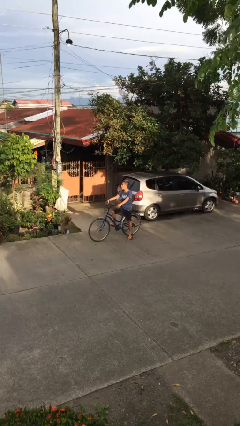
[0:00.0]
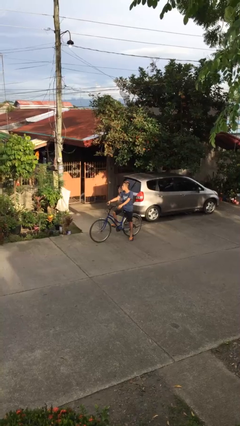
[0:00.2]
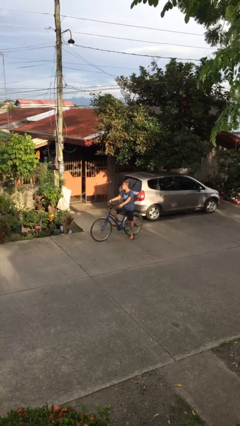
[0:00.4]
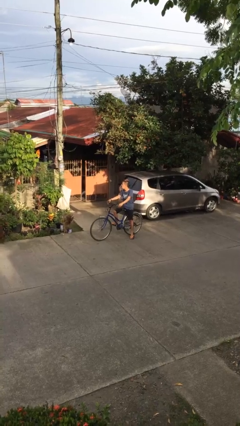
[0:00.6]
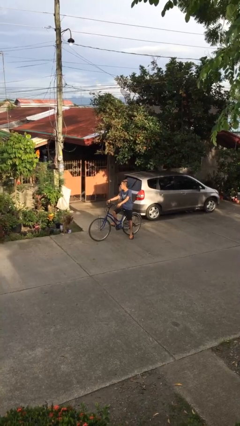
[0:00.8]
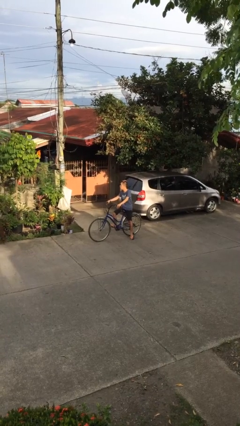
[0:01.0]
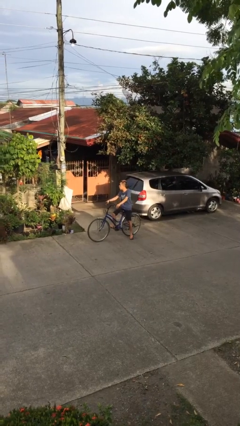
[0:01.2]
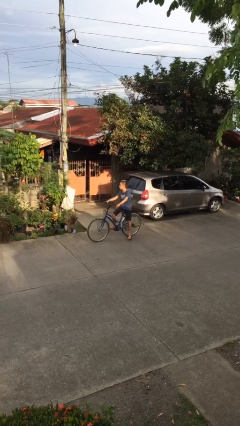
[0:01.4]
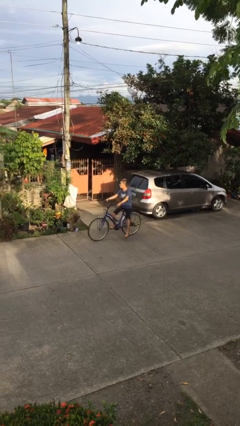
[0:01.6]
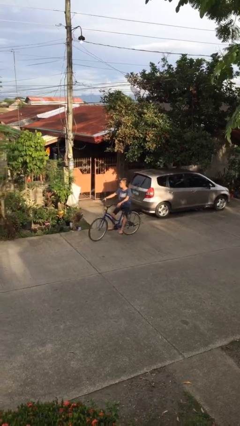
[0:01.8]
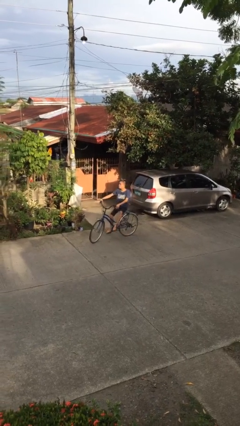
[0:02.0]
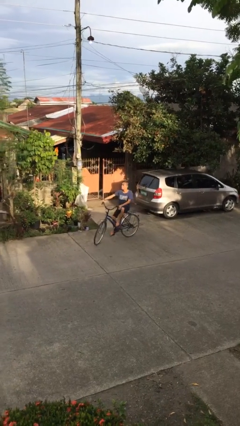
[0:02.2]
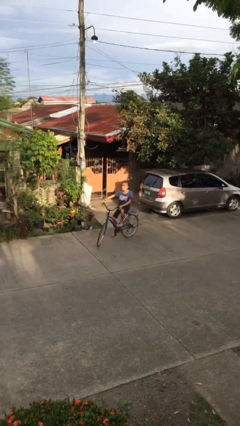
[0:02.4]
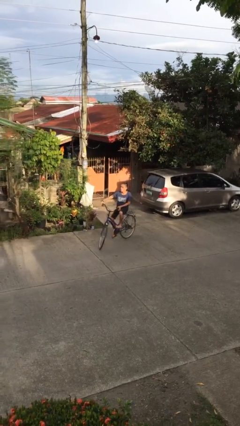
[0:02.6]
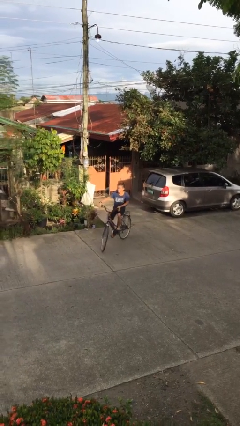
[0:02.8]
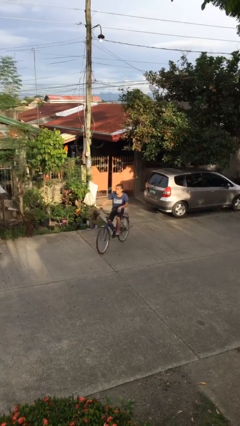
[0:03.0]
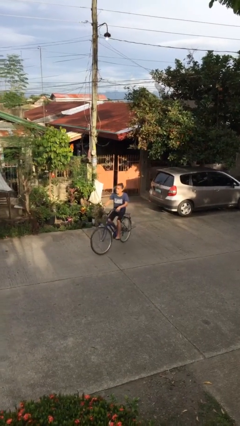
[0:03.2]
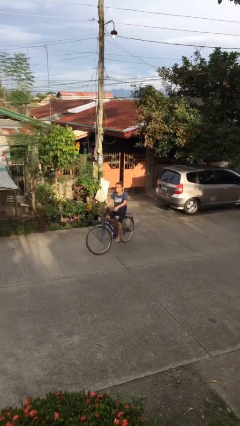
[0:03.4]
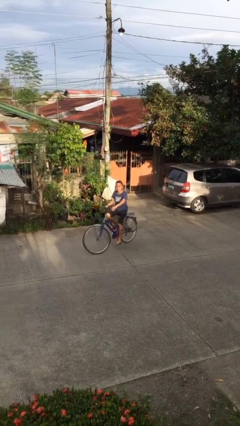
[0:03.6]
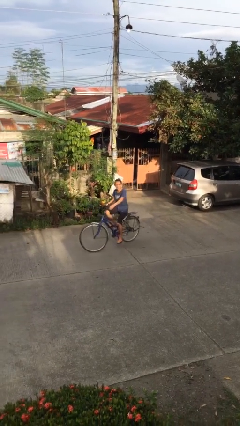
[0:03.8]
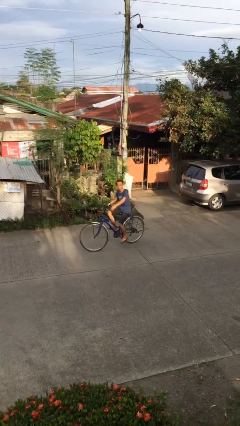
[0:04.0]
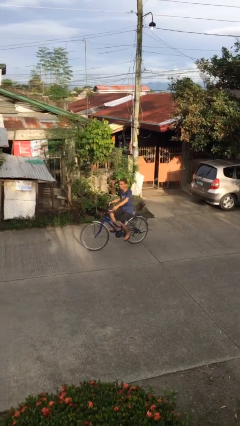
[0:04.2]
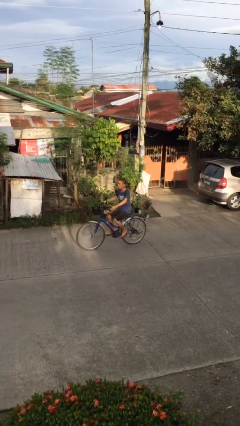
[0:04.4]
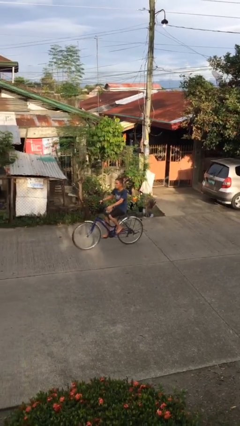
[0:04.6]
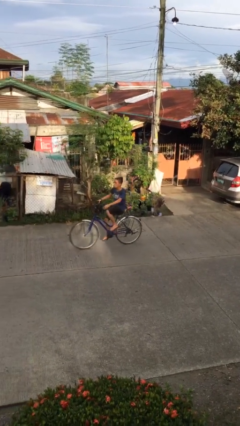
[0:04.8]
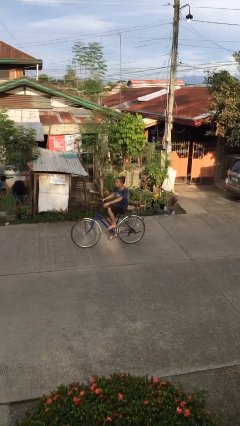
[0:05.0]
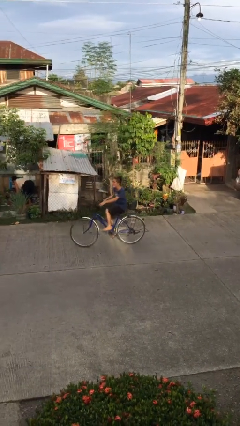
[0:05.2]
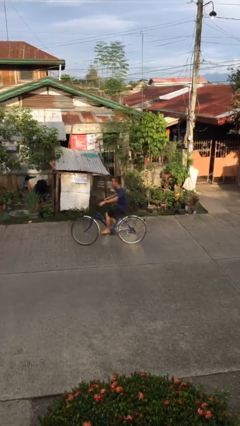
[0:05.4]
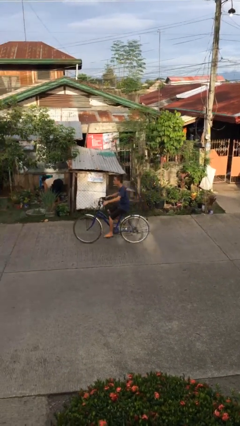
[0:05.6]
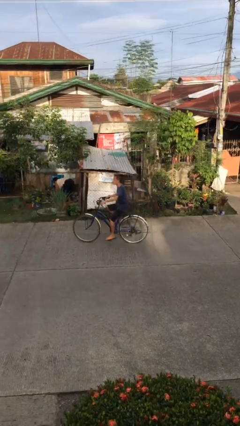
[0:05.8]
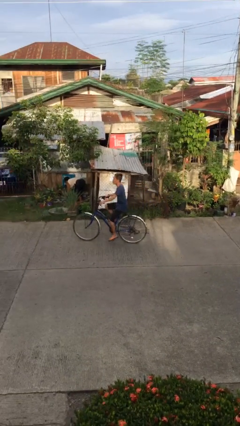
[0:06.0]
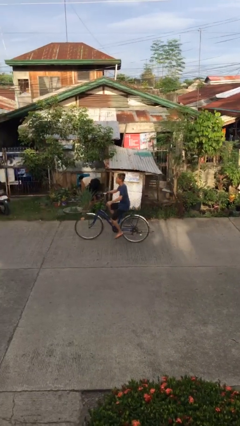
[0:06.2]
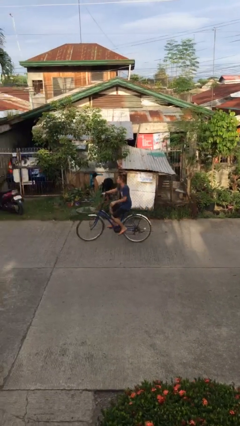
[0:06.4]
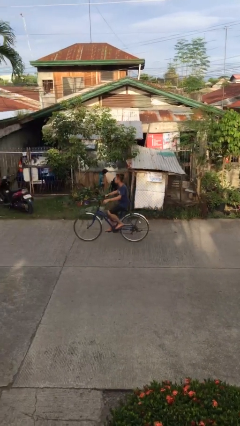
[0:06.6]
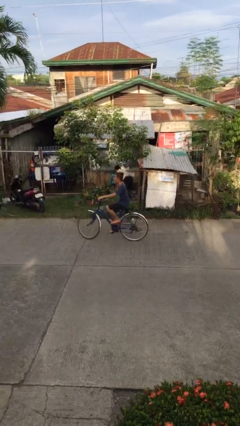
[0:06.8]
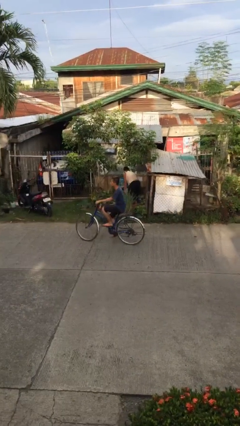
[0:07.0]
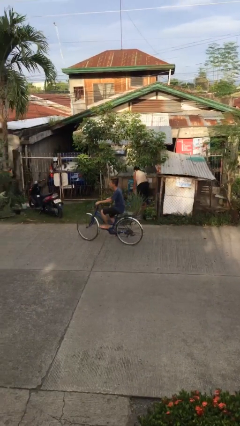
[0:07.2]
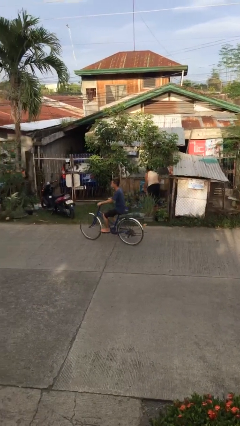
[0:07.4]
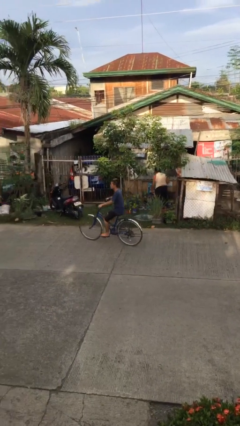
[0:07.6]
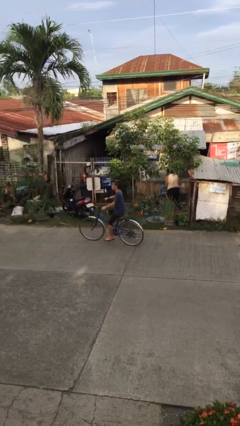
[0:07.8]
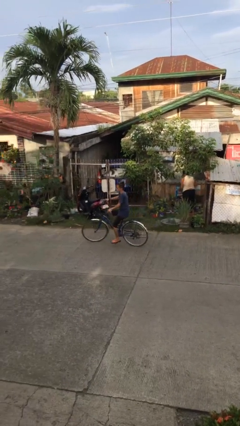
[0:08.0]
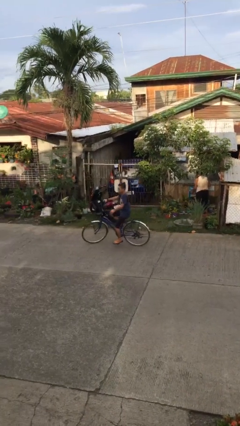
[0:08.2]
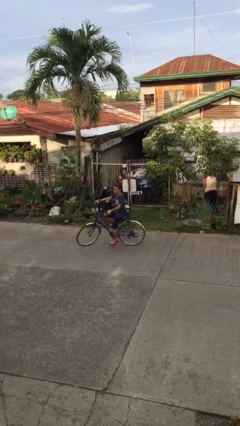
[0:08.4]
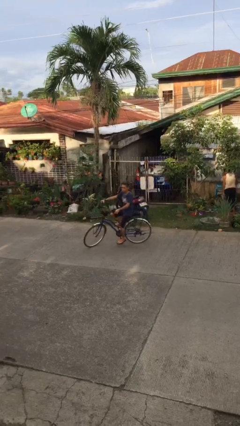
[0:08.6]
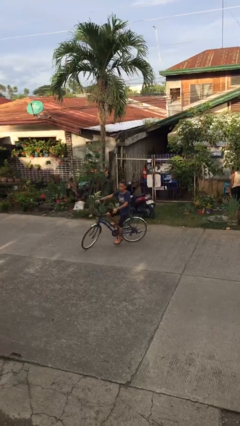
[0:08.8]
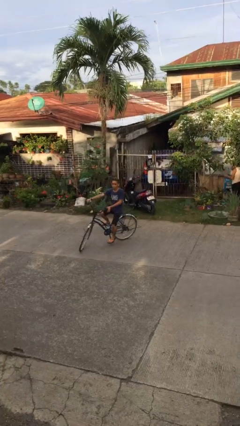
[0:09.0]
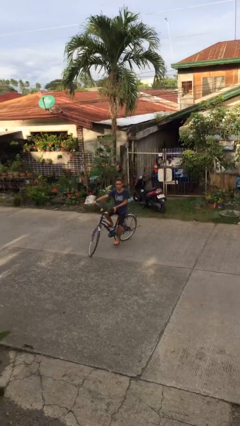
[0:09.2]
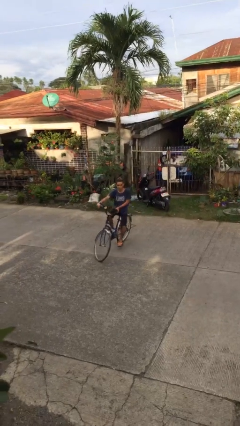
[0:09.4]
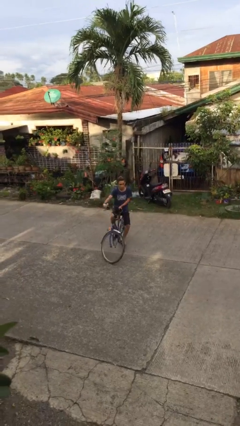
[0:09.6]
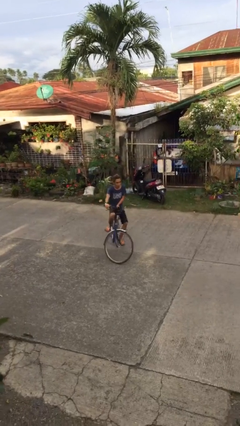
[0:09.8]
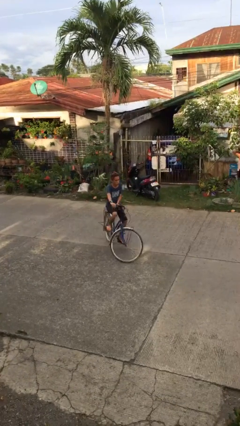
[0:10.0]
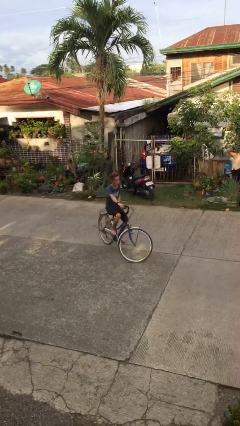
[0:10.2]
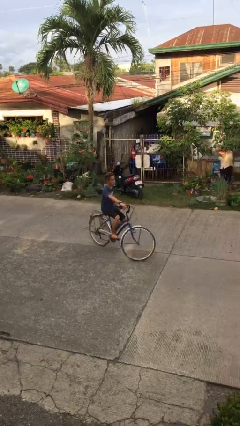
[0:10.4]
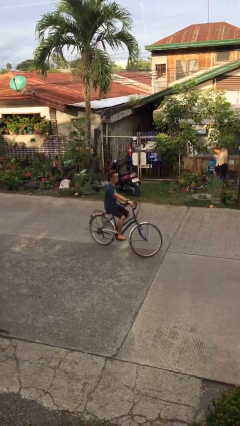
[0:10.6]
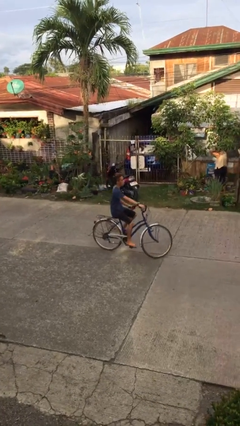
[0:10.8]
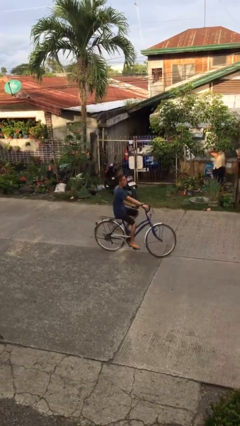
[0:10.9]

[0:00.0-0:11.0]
person rides bicycle

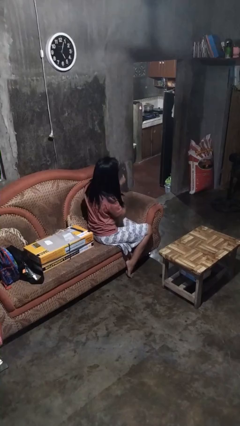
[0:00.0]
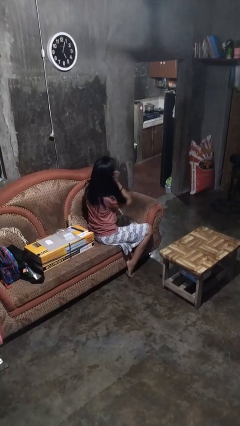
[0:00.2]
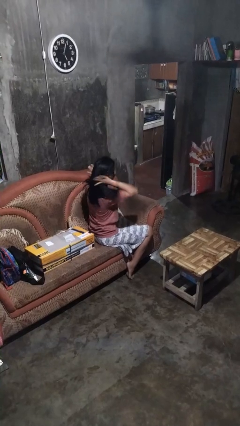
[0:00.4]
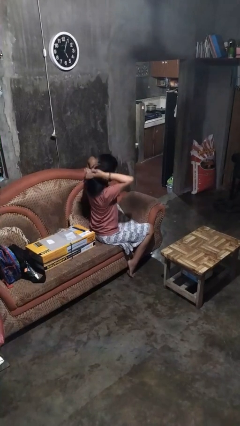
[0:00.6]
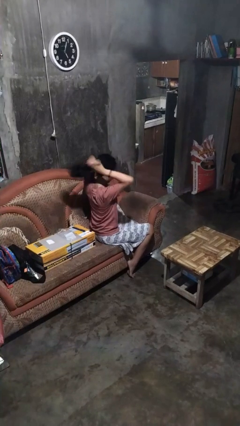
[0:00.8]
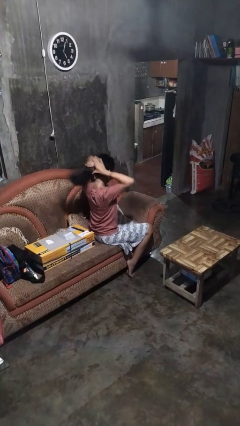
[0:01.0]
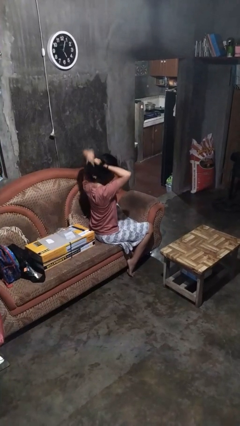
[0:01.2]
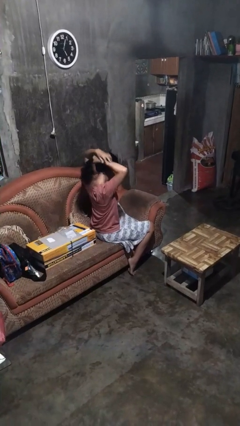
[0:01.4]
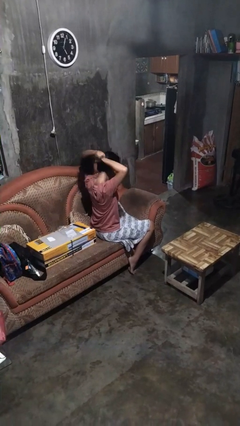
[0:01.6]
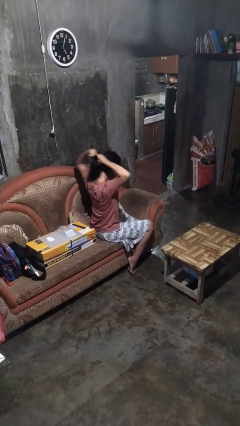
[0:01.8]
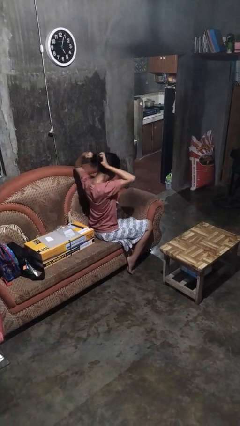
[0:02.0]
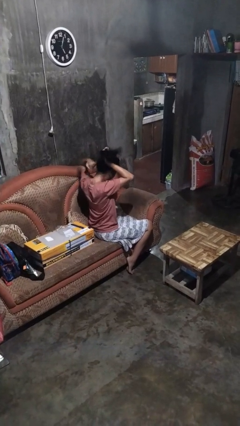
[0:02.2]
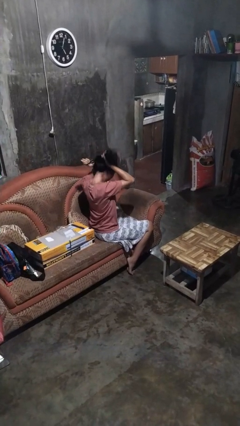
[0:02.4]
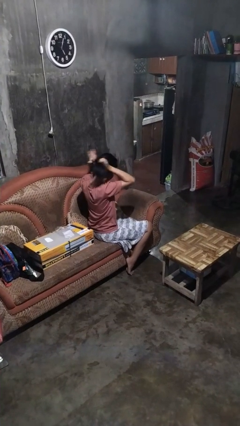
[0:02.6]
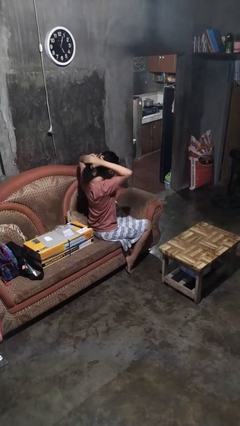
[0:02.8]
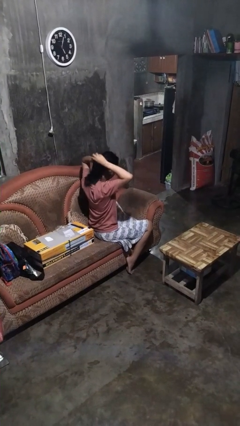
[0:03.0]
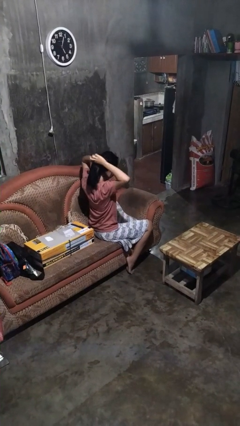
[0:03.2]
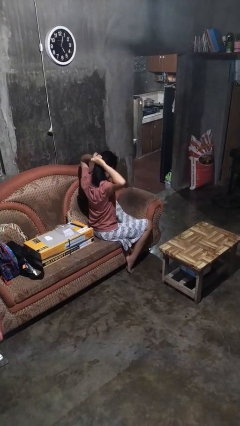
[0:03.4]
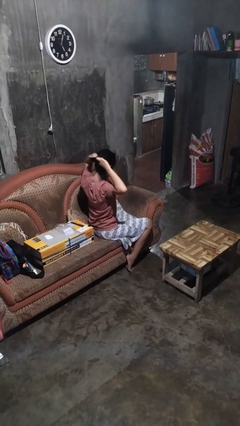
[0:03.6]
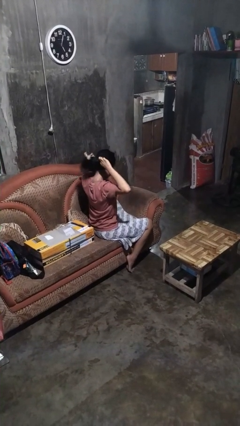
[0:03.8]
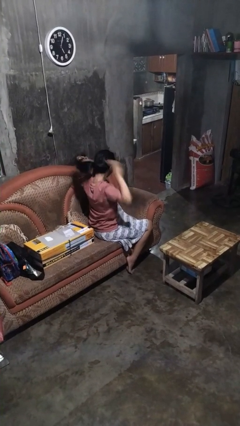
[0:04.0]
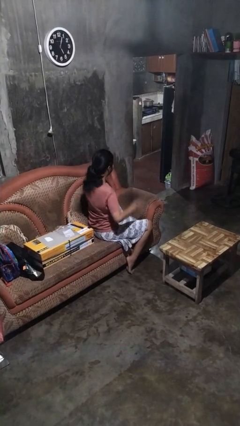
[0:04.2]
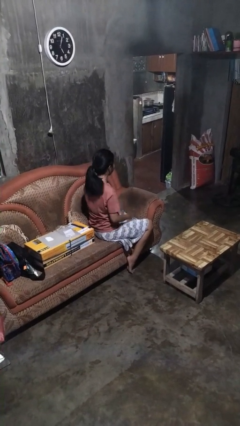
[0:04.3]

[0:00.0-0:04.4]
person puts hair in ponytail

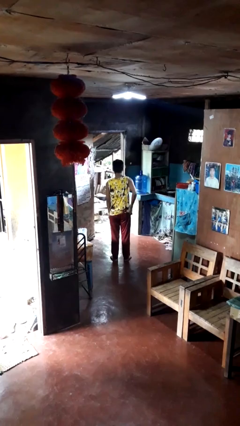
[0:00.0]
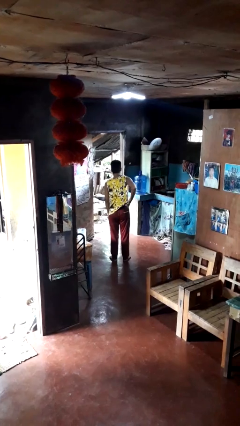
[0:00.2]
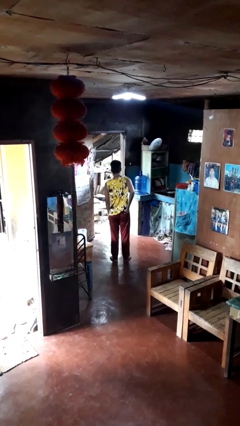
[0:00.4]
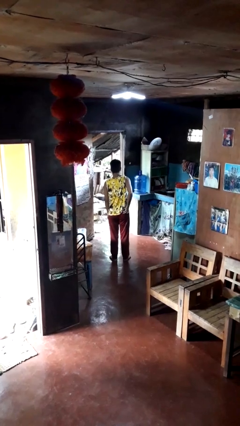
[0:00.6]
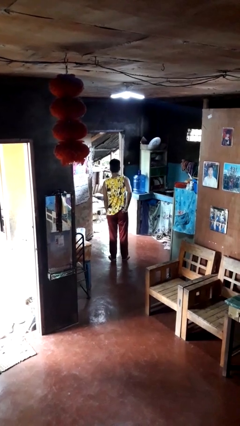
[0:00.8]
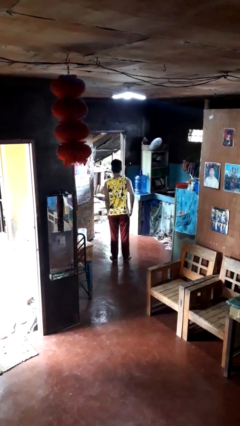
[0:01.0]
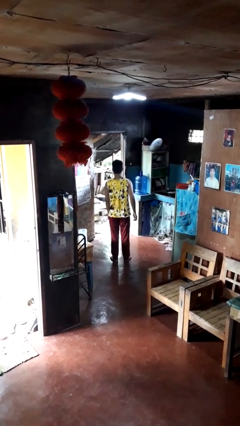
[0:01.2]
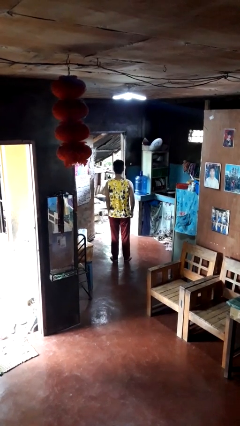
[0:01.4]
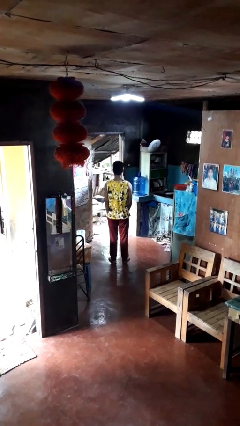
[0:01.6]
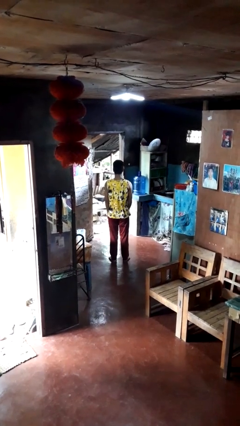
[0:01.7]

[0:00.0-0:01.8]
person puts phone into pocket

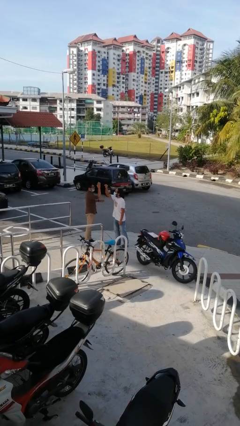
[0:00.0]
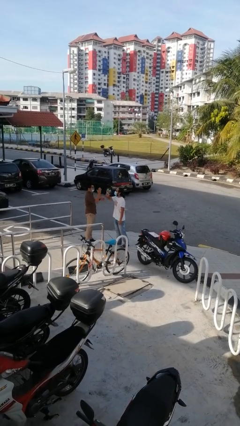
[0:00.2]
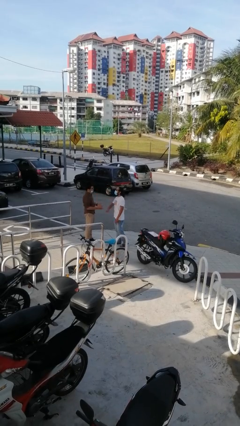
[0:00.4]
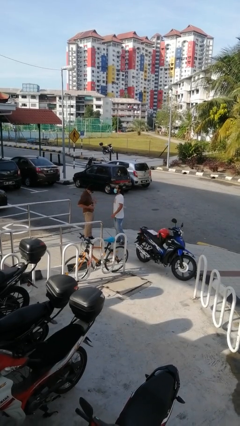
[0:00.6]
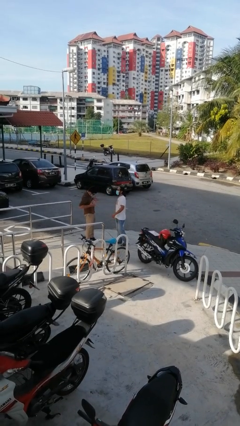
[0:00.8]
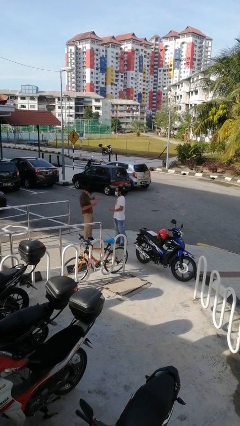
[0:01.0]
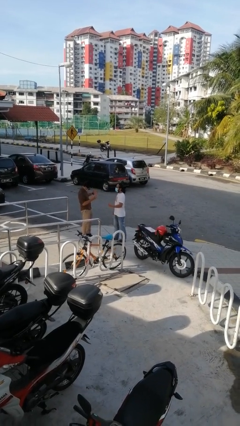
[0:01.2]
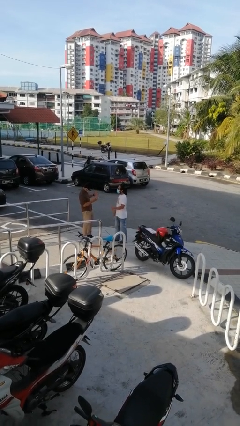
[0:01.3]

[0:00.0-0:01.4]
person highfives hand
